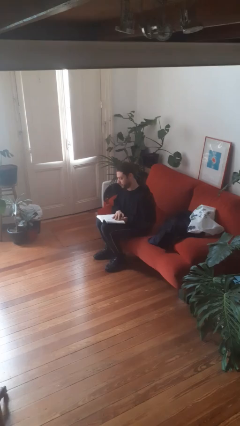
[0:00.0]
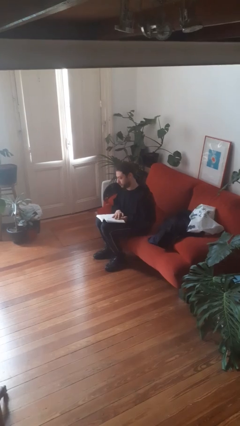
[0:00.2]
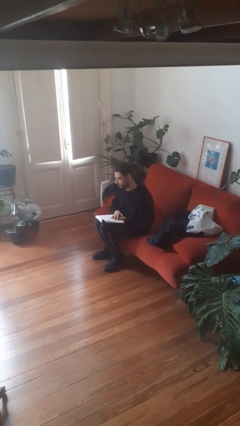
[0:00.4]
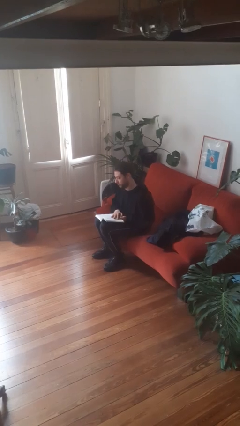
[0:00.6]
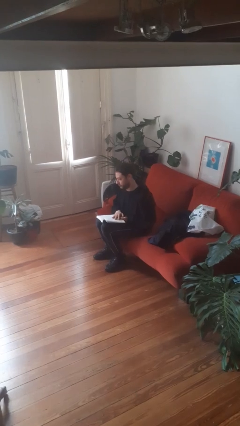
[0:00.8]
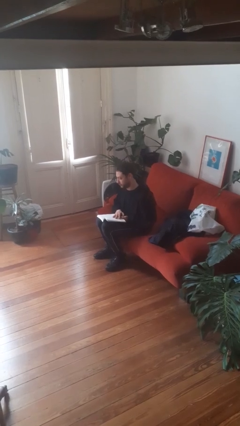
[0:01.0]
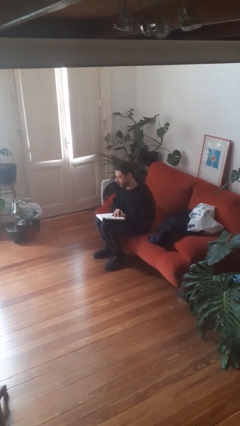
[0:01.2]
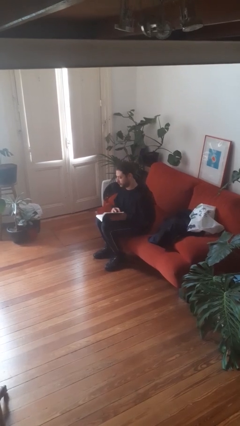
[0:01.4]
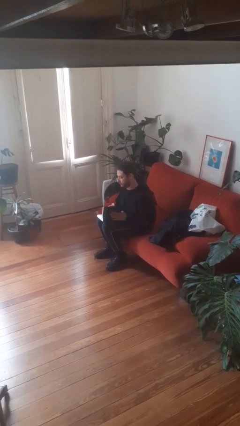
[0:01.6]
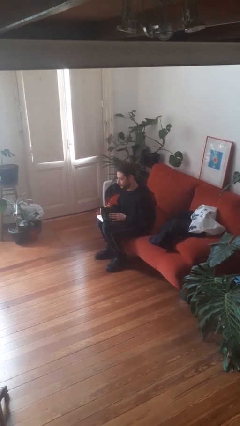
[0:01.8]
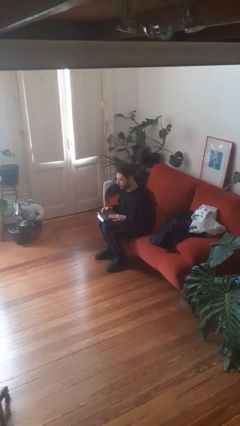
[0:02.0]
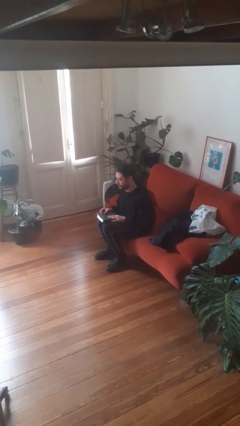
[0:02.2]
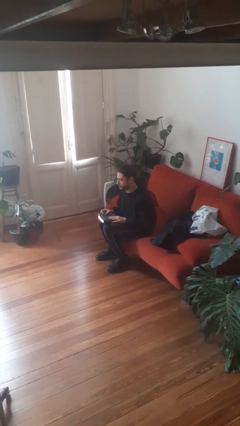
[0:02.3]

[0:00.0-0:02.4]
person reads book

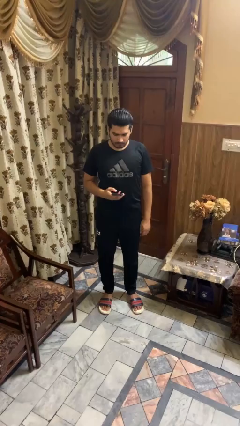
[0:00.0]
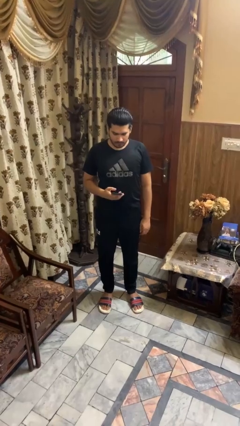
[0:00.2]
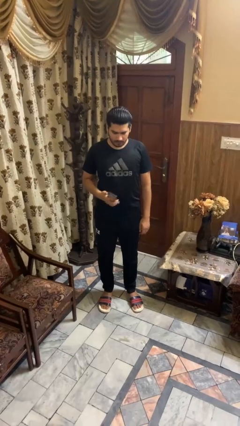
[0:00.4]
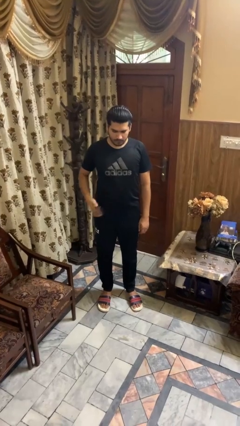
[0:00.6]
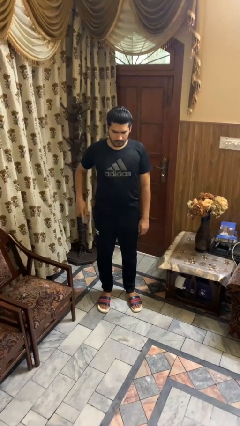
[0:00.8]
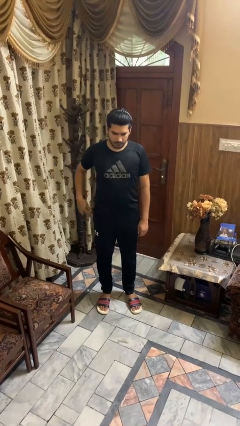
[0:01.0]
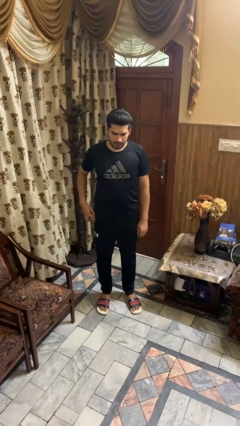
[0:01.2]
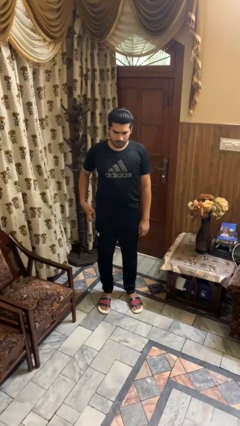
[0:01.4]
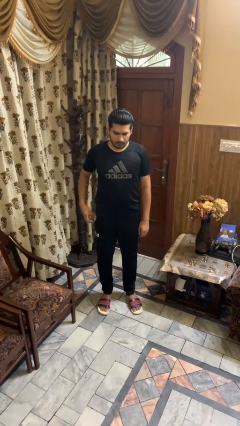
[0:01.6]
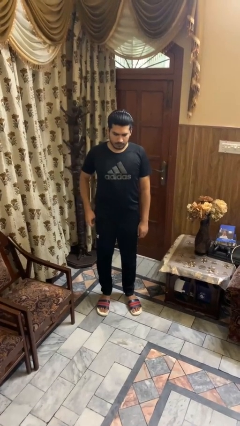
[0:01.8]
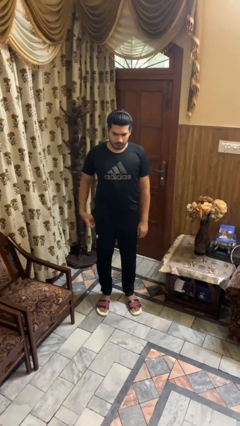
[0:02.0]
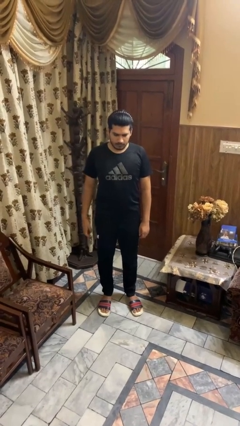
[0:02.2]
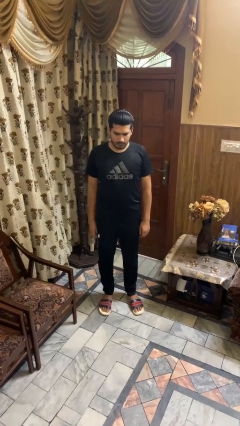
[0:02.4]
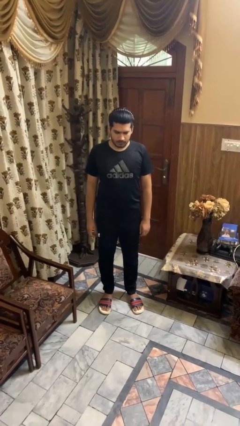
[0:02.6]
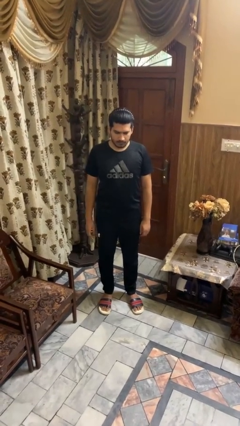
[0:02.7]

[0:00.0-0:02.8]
person puts phone into pocket

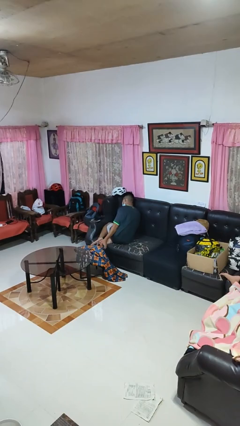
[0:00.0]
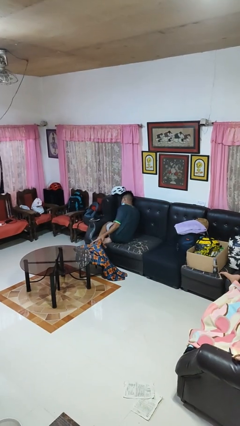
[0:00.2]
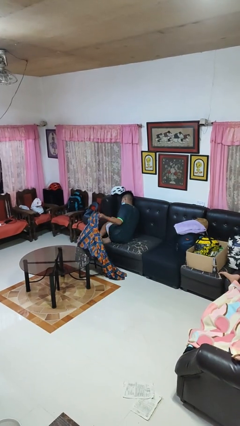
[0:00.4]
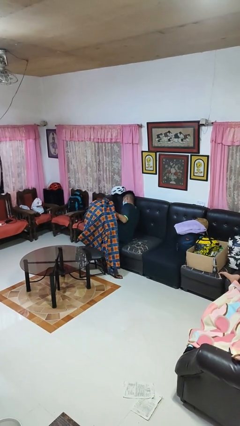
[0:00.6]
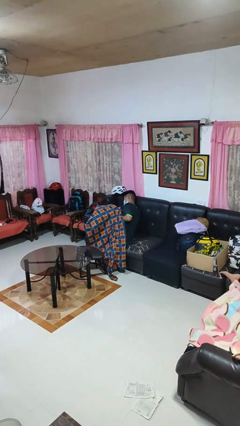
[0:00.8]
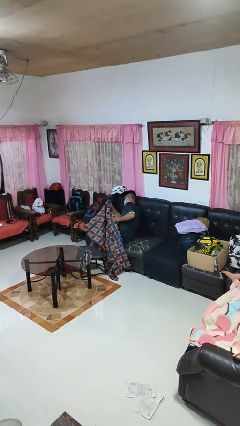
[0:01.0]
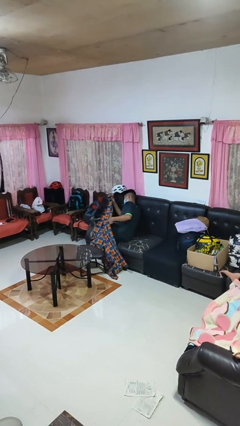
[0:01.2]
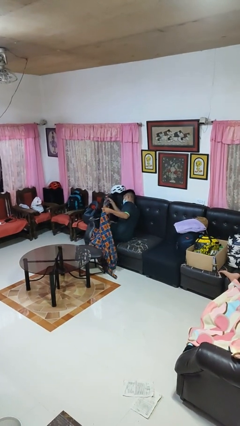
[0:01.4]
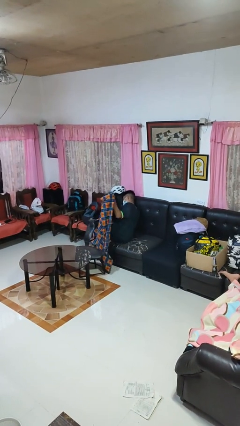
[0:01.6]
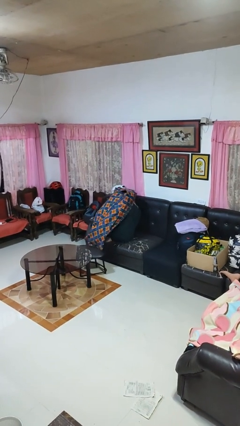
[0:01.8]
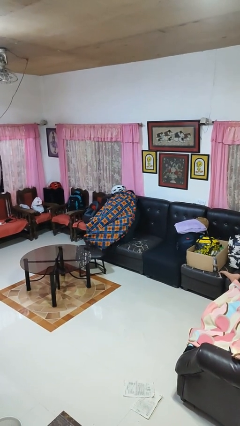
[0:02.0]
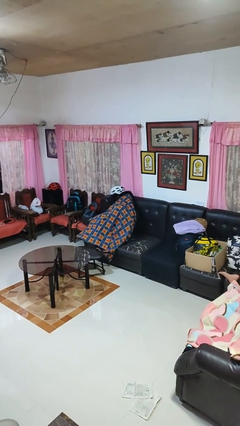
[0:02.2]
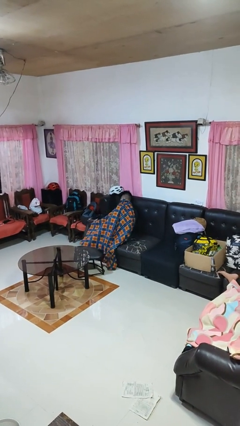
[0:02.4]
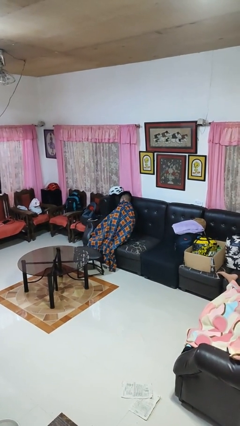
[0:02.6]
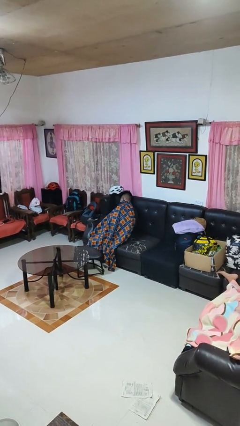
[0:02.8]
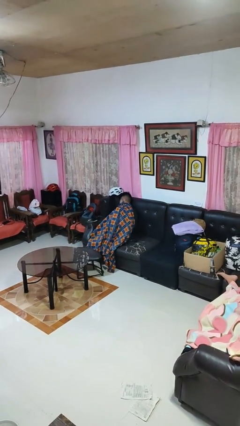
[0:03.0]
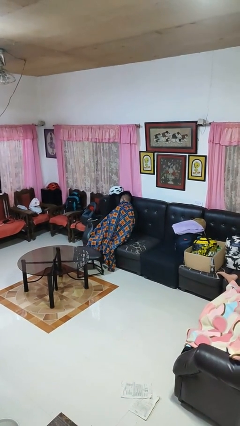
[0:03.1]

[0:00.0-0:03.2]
person covers with blanket

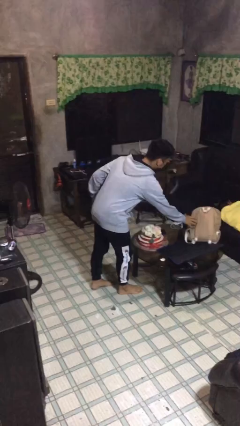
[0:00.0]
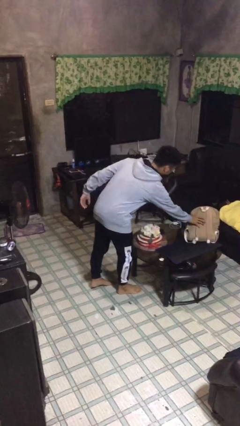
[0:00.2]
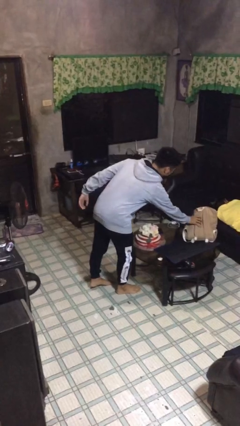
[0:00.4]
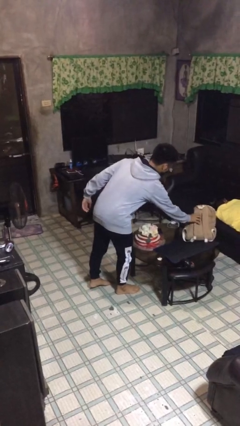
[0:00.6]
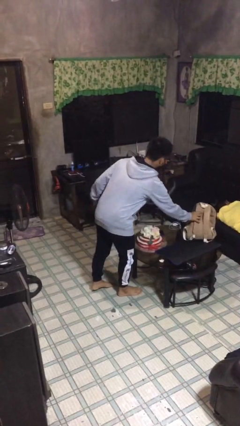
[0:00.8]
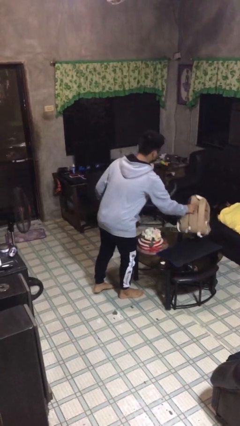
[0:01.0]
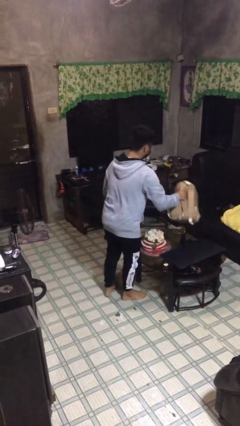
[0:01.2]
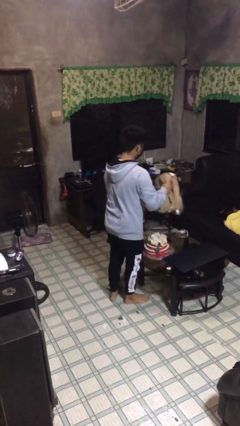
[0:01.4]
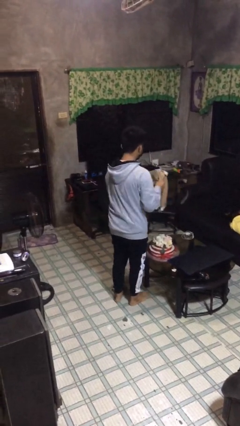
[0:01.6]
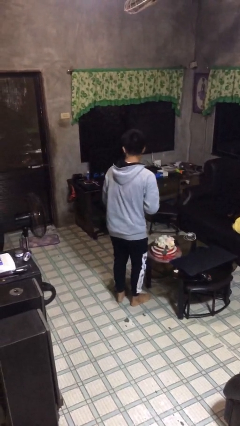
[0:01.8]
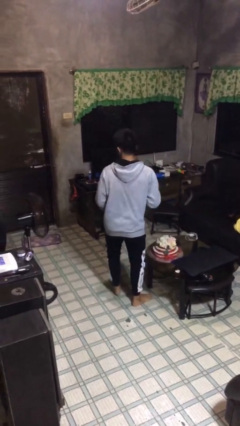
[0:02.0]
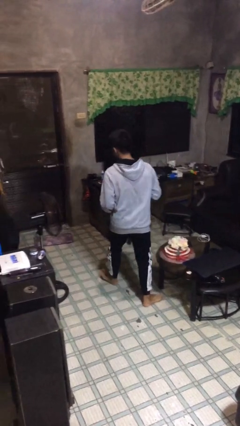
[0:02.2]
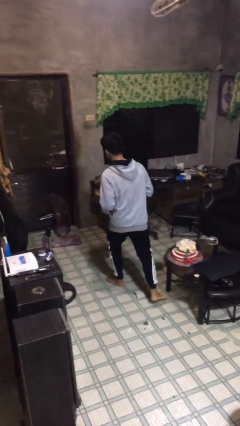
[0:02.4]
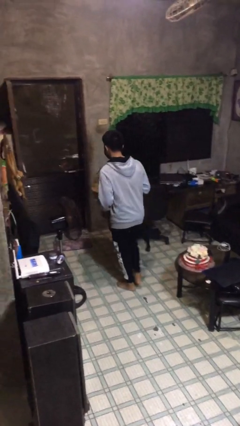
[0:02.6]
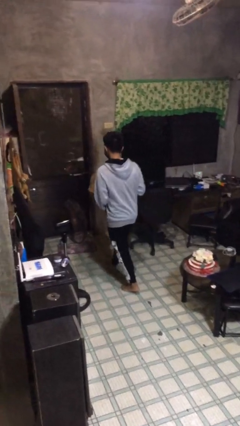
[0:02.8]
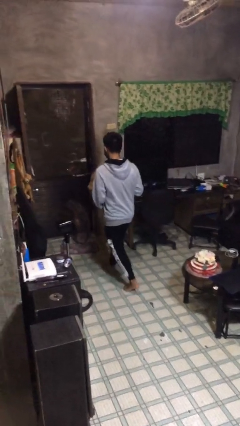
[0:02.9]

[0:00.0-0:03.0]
person steals object from person

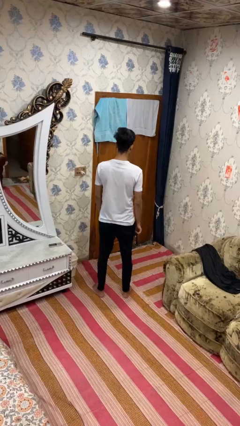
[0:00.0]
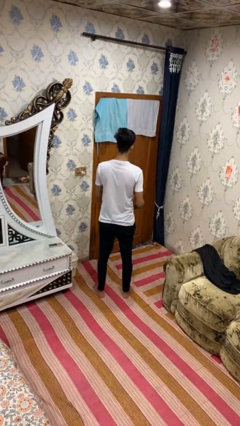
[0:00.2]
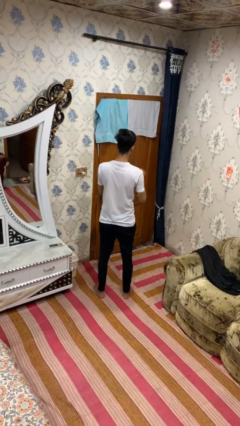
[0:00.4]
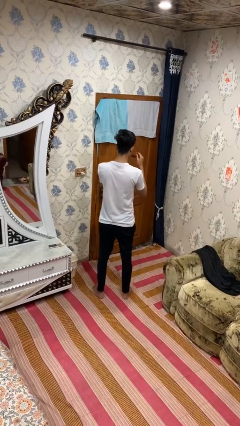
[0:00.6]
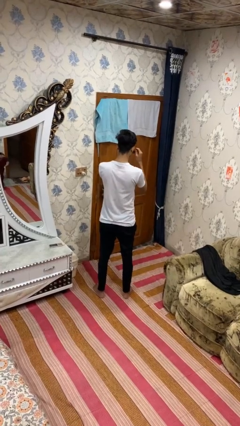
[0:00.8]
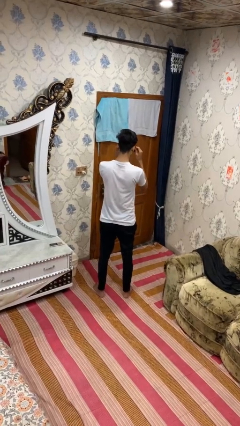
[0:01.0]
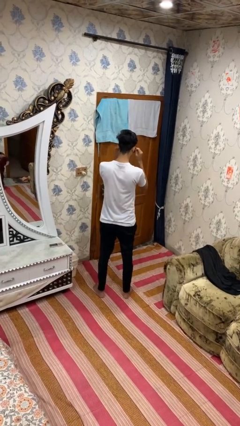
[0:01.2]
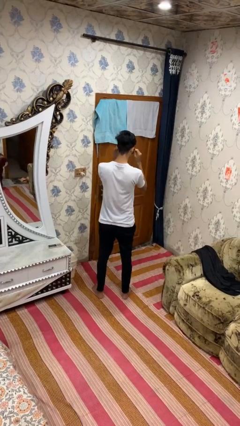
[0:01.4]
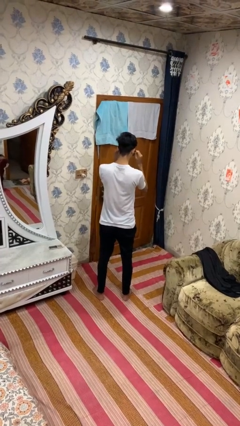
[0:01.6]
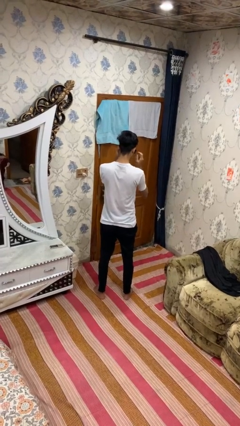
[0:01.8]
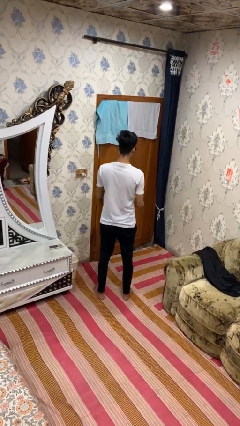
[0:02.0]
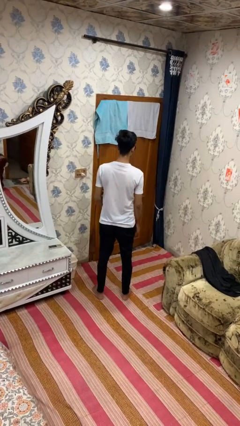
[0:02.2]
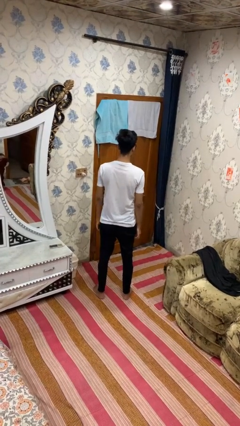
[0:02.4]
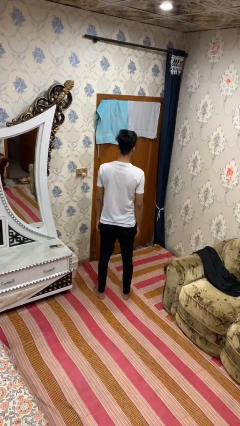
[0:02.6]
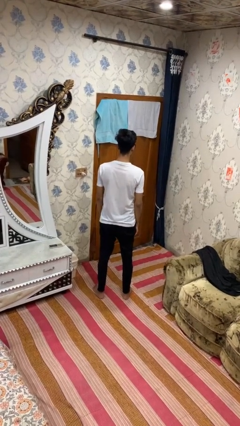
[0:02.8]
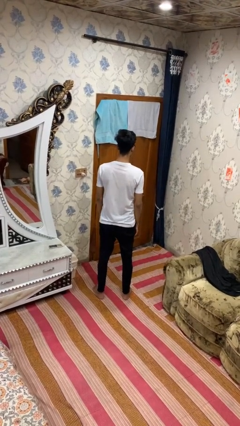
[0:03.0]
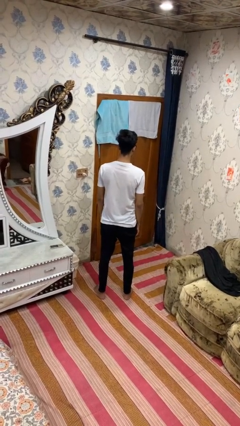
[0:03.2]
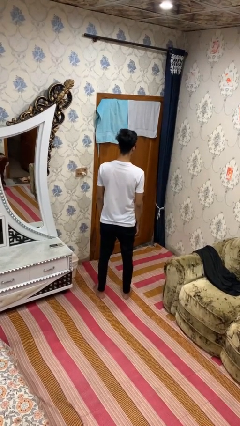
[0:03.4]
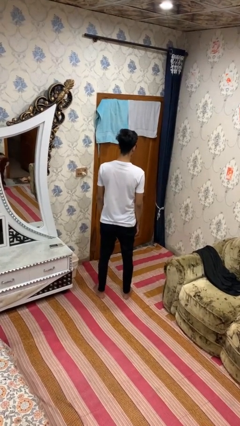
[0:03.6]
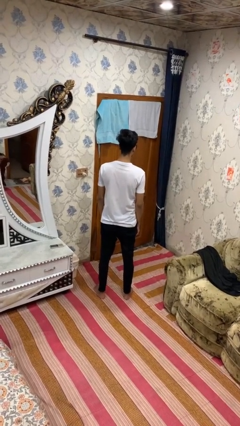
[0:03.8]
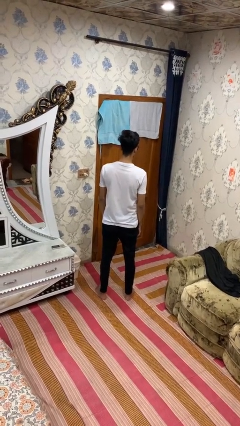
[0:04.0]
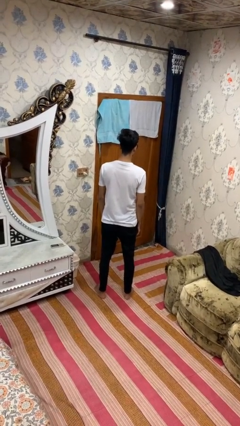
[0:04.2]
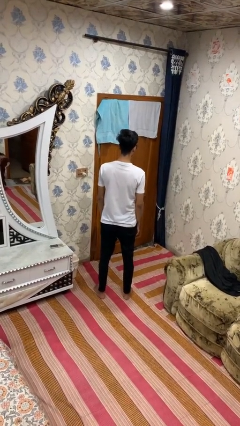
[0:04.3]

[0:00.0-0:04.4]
person puts on sunglasses

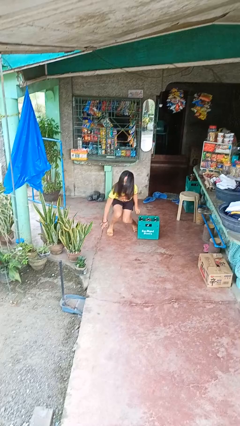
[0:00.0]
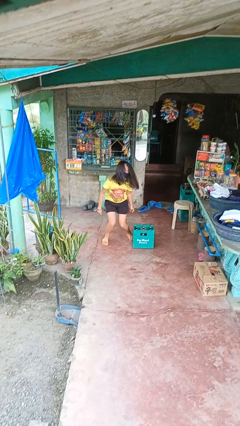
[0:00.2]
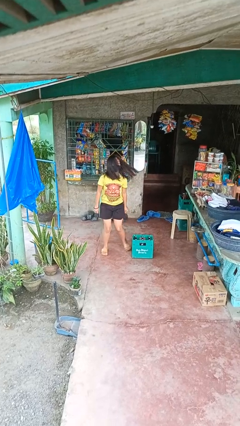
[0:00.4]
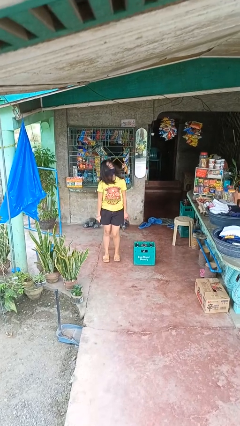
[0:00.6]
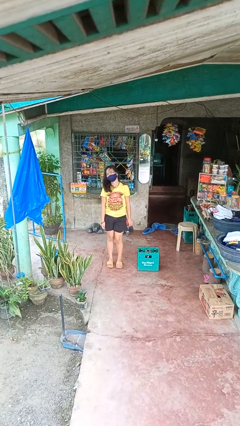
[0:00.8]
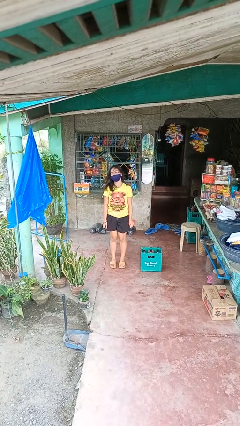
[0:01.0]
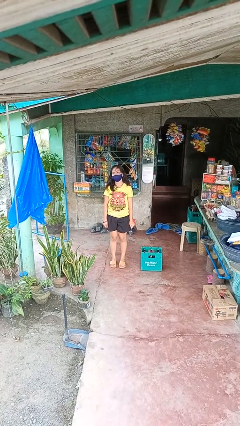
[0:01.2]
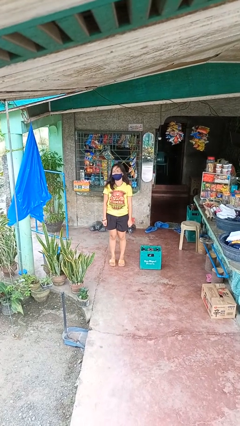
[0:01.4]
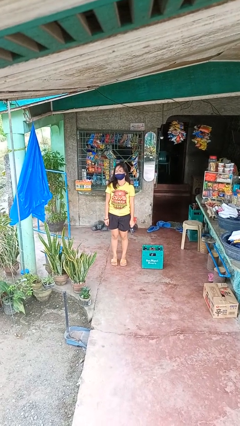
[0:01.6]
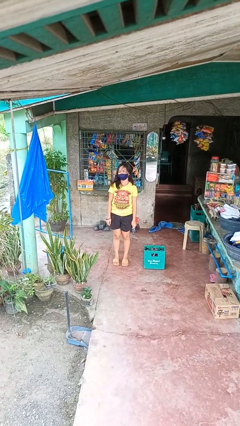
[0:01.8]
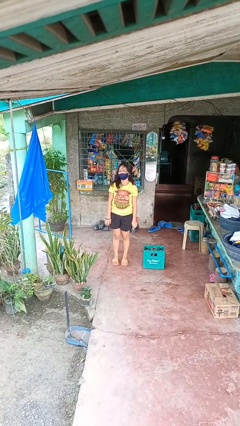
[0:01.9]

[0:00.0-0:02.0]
person stands up from floor
